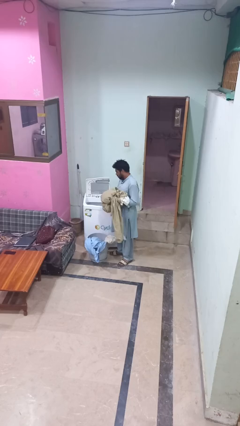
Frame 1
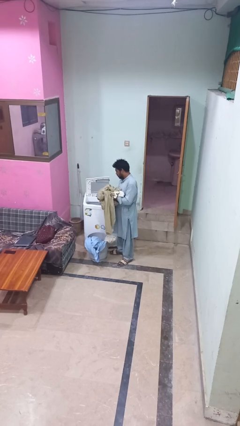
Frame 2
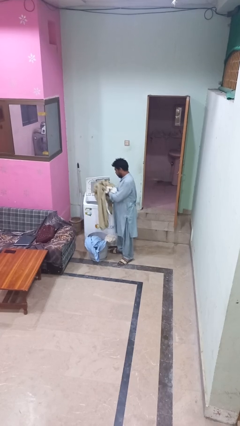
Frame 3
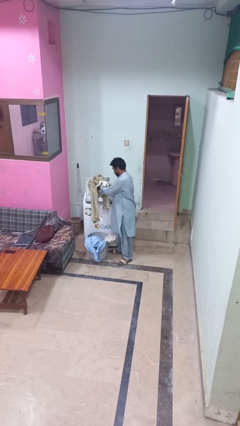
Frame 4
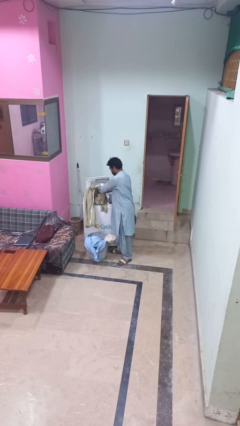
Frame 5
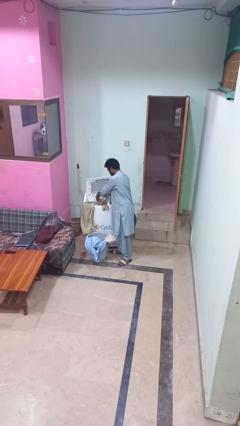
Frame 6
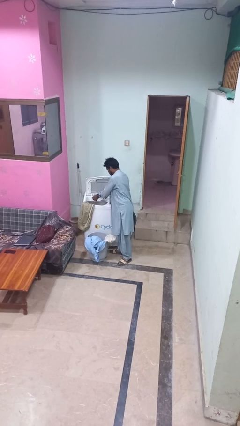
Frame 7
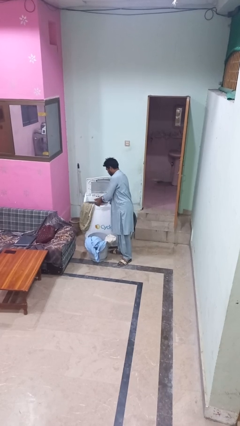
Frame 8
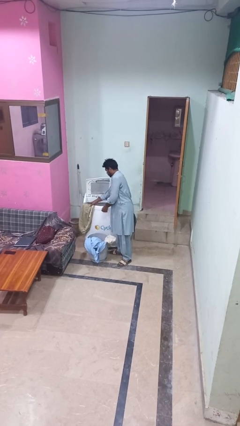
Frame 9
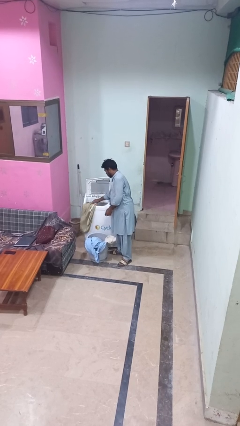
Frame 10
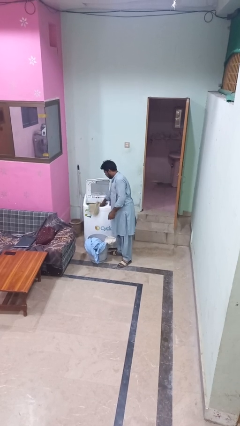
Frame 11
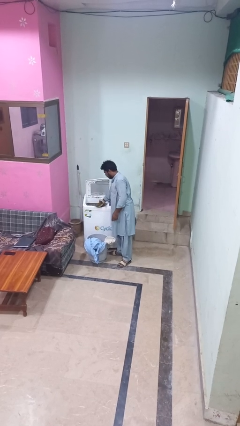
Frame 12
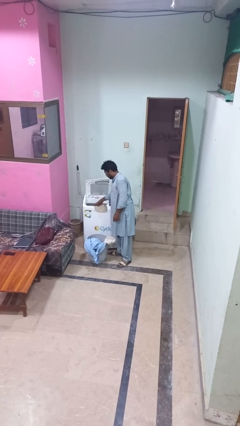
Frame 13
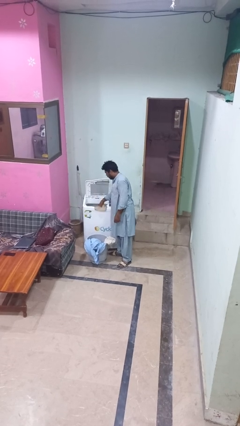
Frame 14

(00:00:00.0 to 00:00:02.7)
person loads clotheswasher

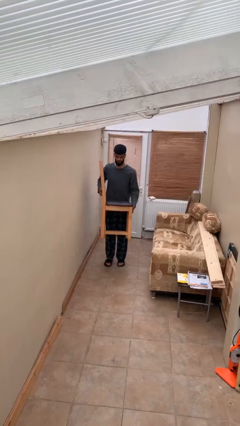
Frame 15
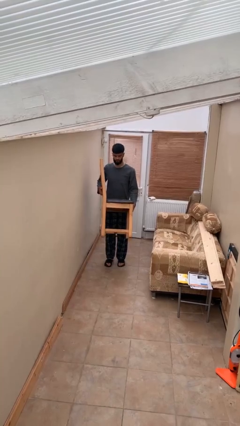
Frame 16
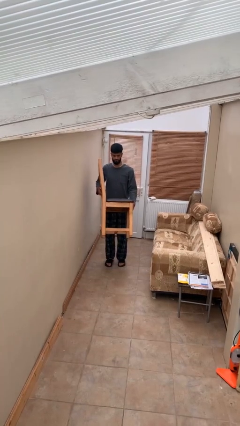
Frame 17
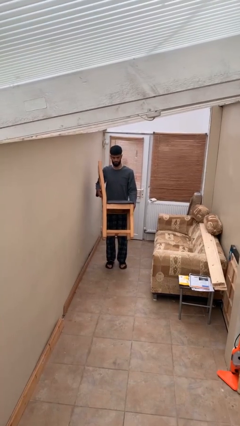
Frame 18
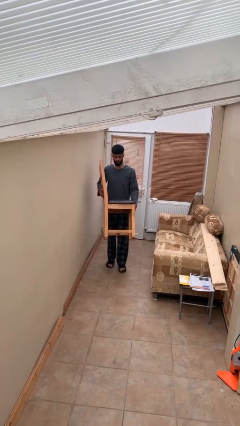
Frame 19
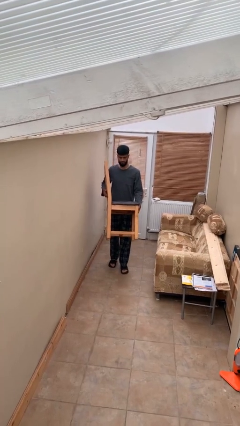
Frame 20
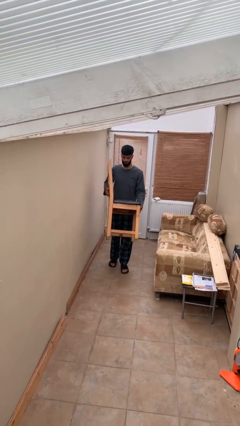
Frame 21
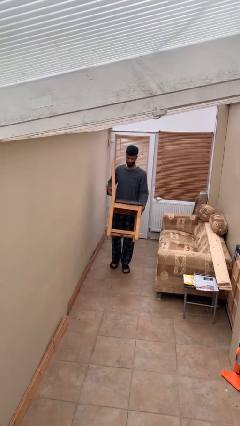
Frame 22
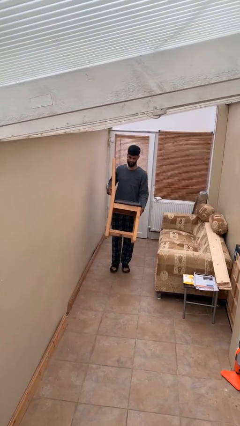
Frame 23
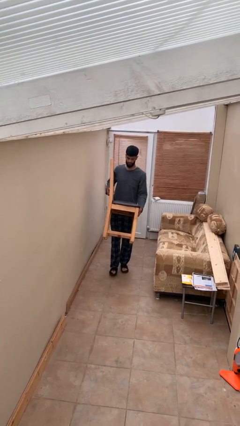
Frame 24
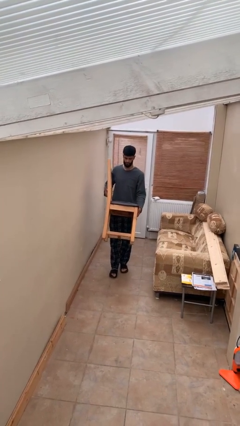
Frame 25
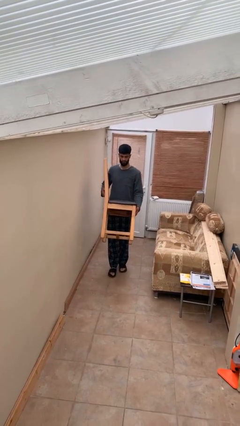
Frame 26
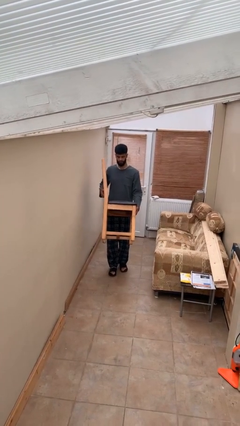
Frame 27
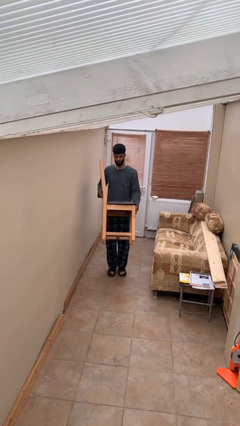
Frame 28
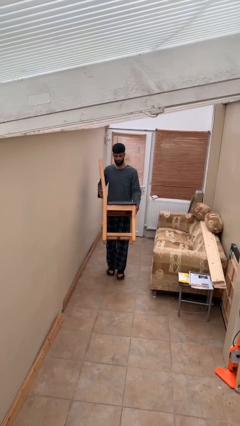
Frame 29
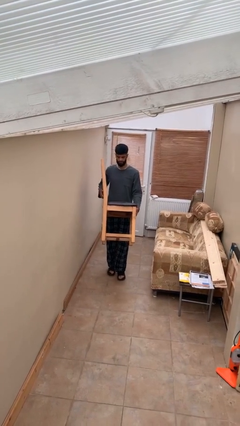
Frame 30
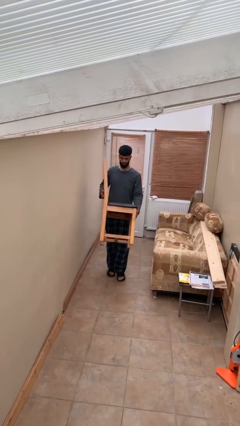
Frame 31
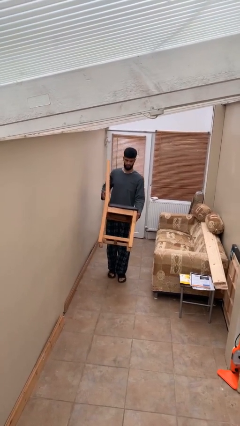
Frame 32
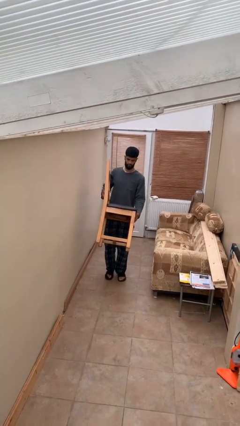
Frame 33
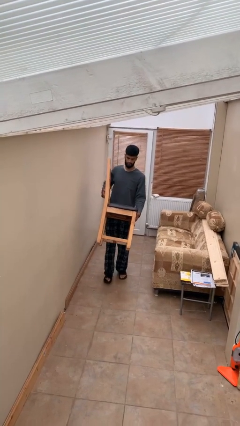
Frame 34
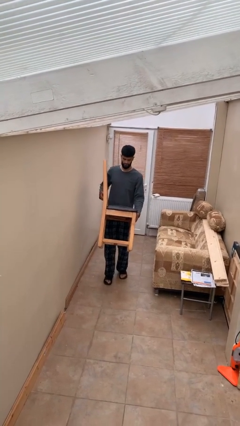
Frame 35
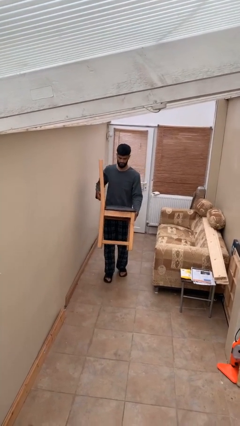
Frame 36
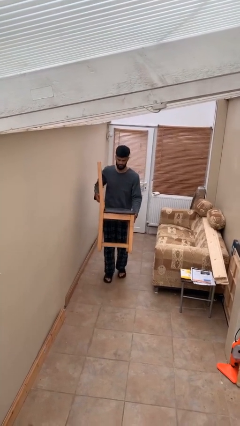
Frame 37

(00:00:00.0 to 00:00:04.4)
person carries heavy object

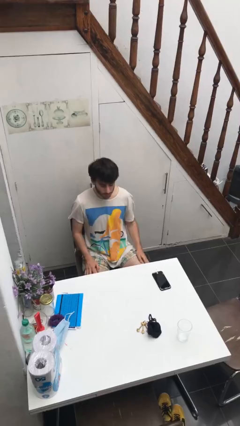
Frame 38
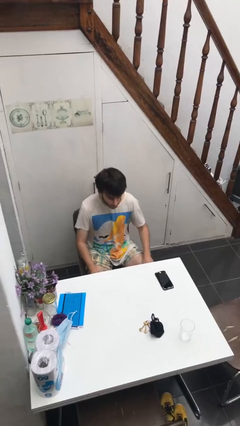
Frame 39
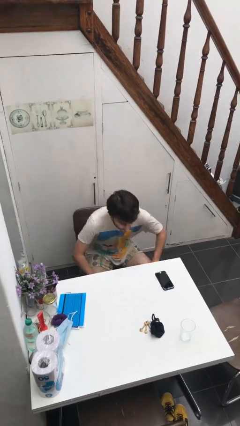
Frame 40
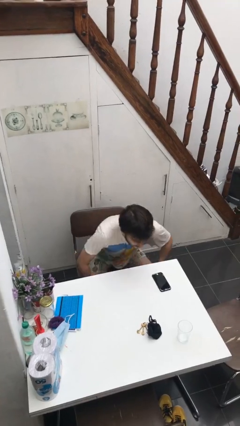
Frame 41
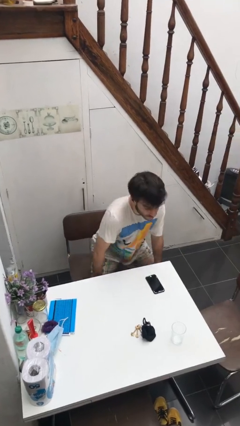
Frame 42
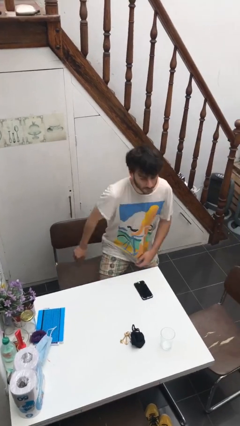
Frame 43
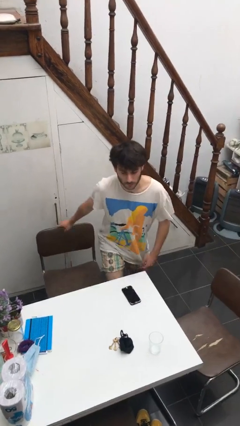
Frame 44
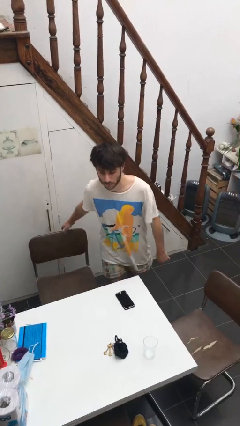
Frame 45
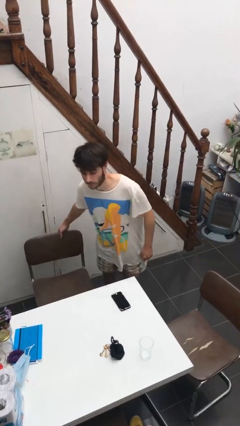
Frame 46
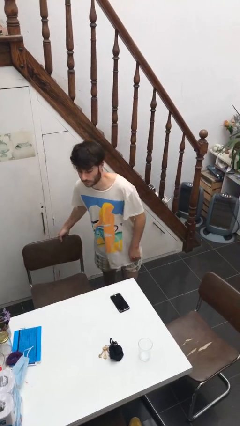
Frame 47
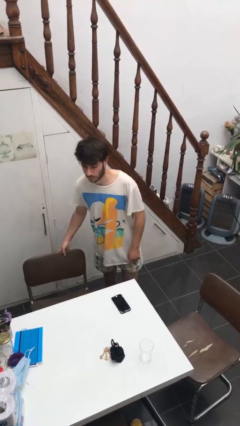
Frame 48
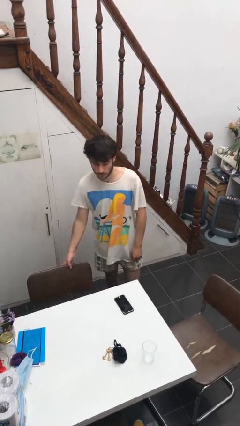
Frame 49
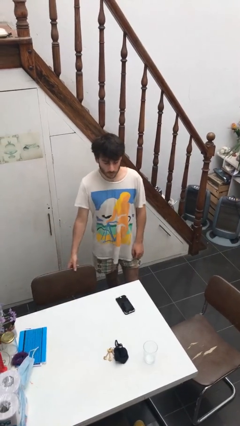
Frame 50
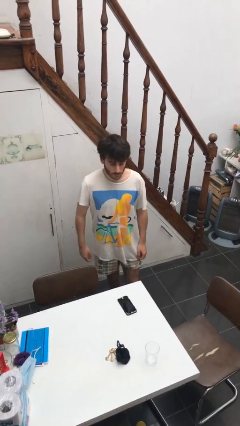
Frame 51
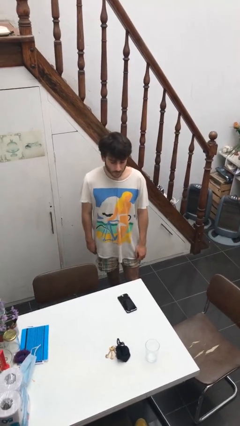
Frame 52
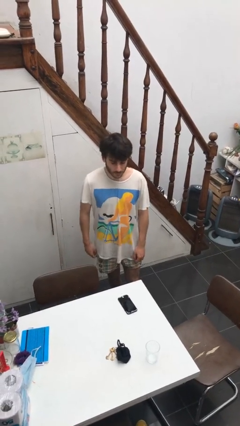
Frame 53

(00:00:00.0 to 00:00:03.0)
person stands up

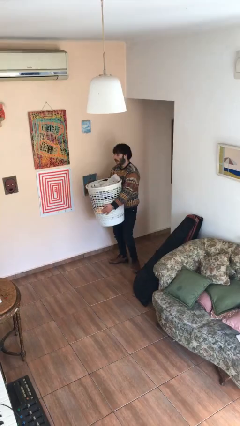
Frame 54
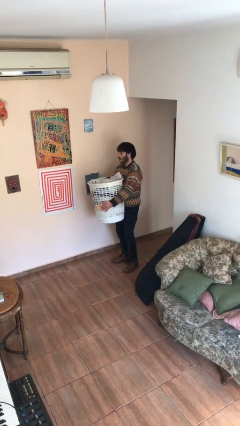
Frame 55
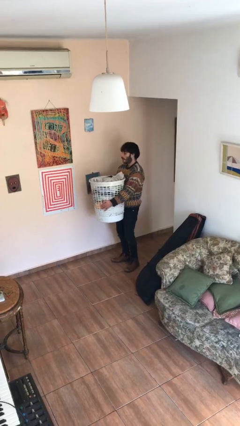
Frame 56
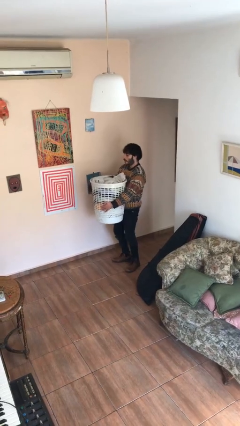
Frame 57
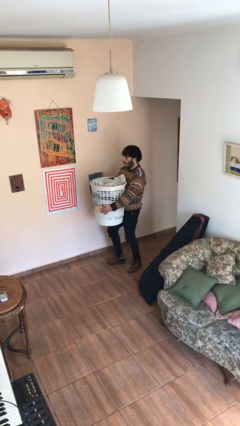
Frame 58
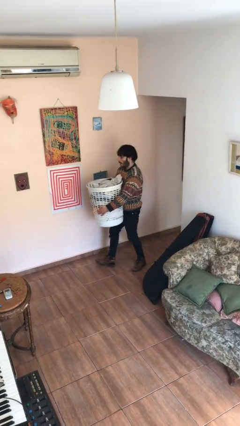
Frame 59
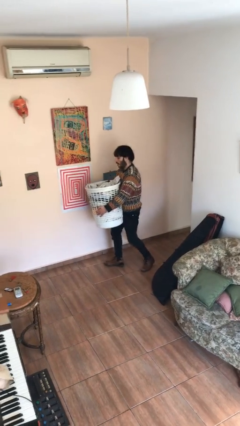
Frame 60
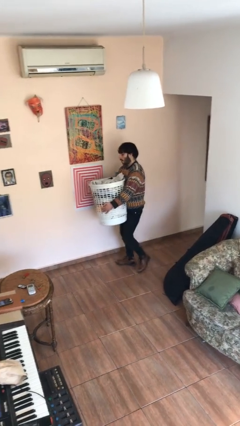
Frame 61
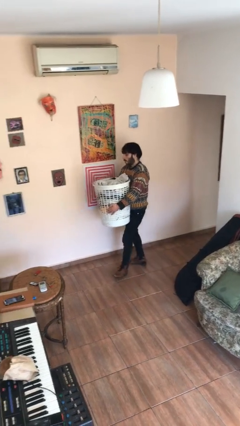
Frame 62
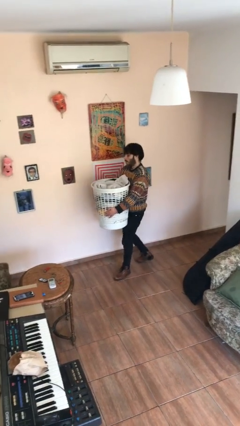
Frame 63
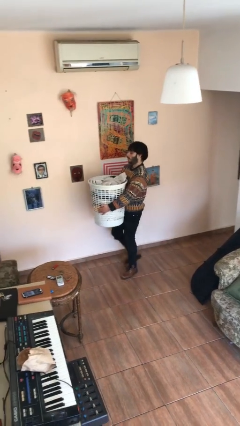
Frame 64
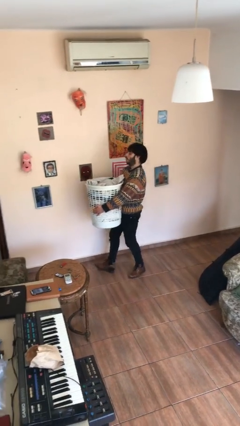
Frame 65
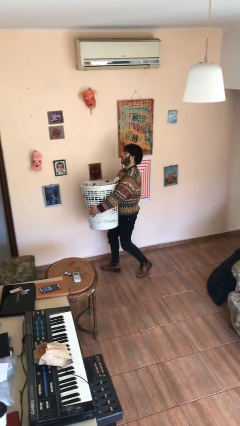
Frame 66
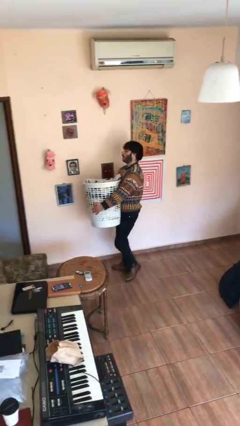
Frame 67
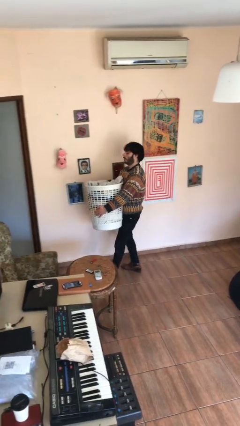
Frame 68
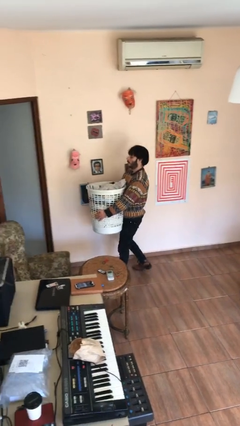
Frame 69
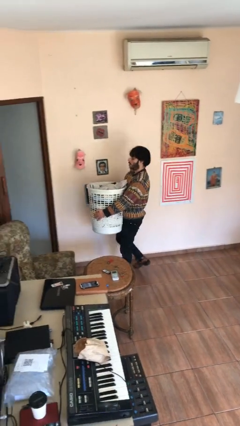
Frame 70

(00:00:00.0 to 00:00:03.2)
person carries laundry basket

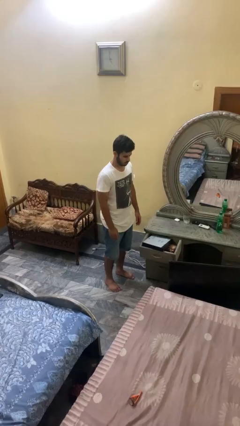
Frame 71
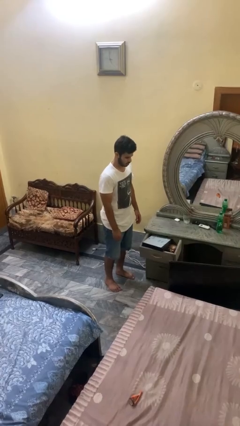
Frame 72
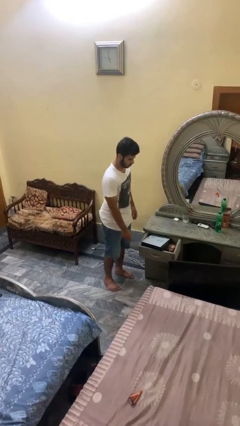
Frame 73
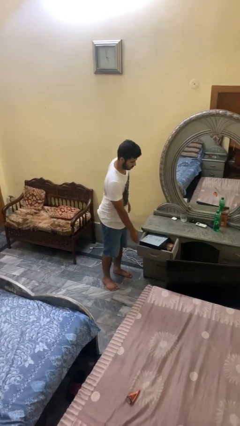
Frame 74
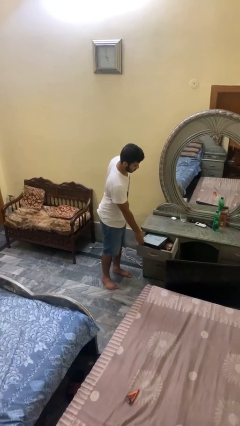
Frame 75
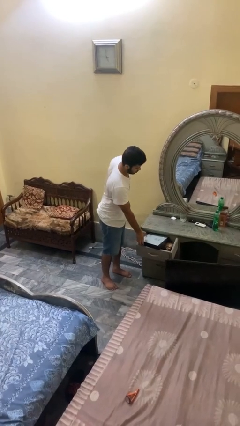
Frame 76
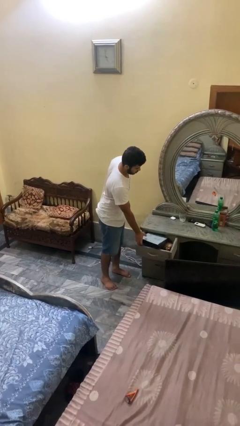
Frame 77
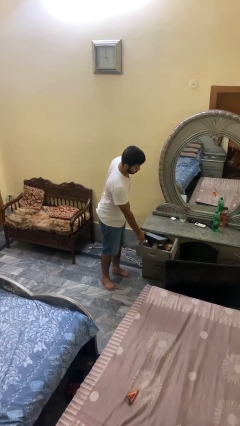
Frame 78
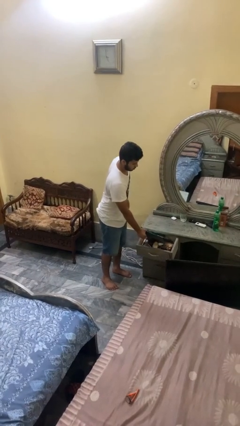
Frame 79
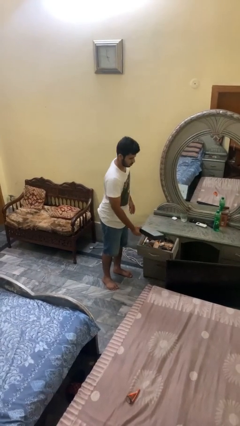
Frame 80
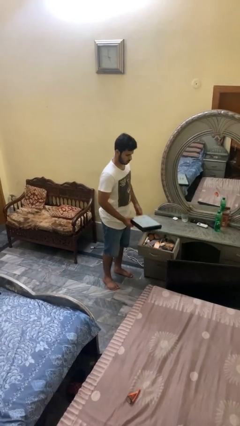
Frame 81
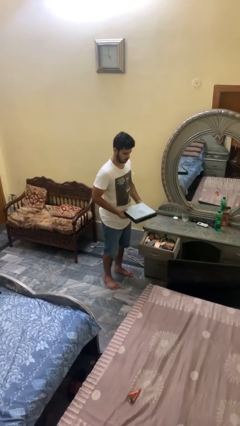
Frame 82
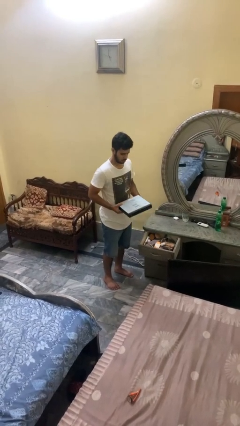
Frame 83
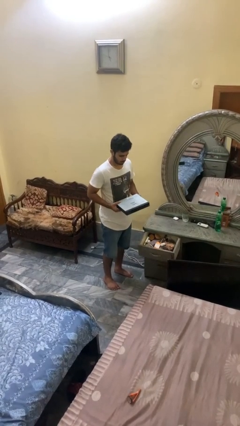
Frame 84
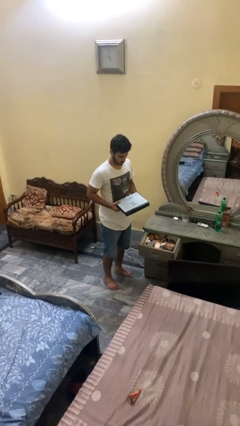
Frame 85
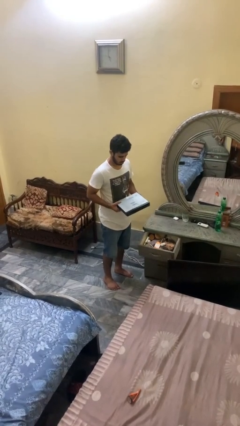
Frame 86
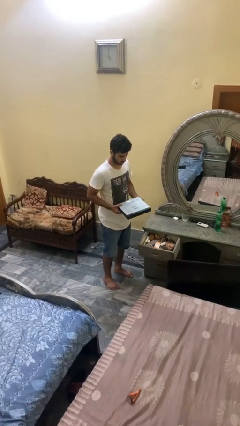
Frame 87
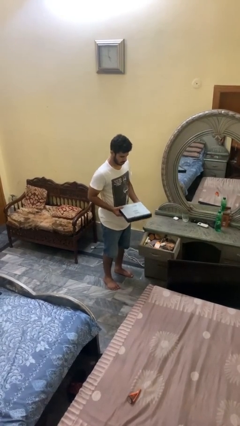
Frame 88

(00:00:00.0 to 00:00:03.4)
person picks up object from cabinet

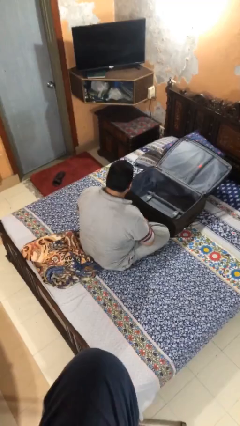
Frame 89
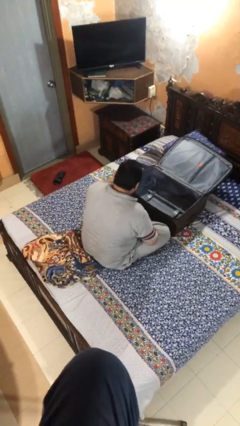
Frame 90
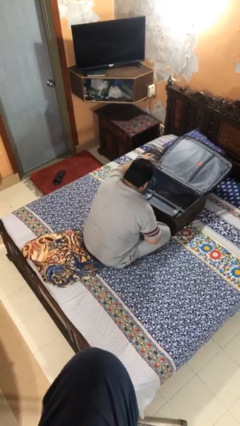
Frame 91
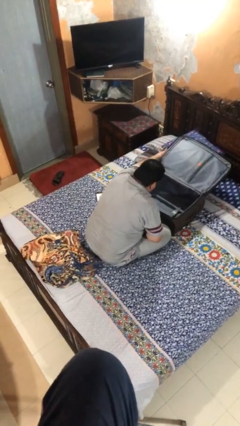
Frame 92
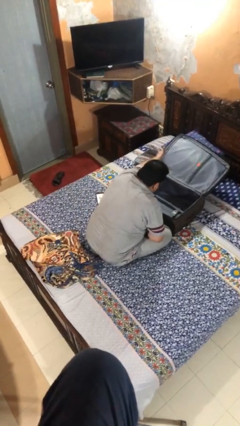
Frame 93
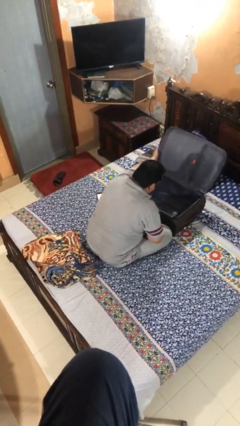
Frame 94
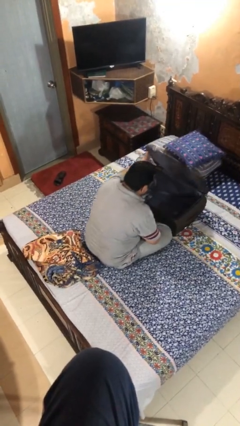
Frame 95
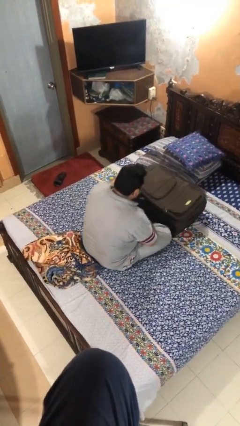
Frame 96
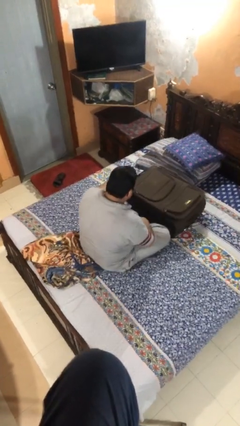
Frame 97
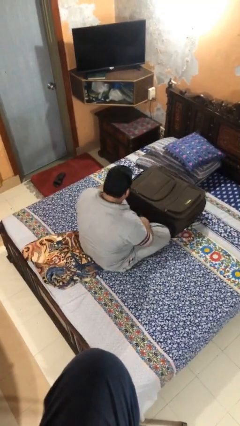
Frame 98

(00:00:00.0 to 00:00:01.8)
person closes suitcase
